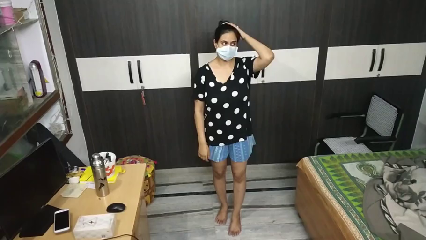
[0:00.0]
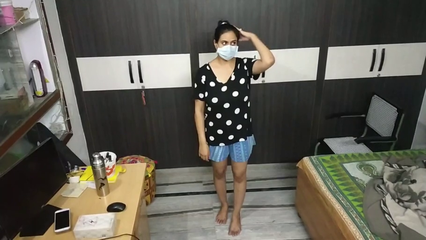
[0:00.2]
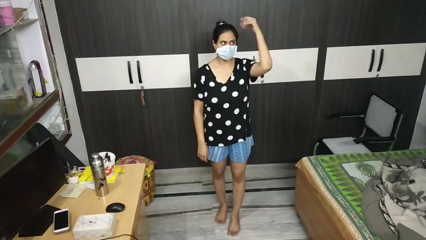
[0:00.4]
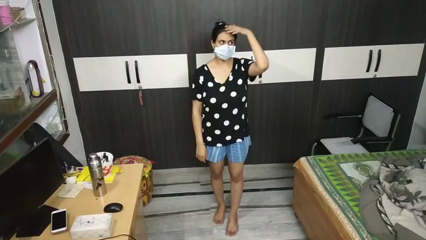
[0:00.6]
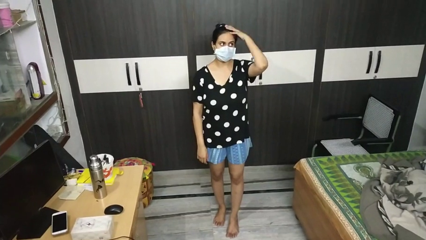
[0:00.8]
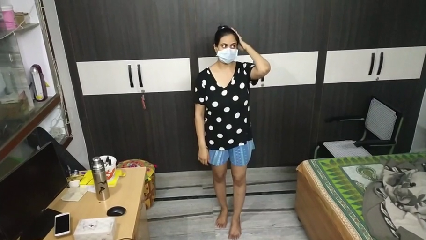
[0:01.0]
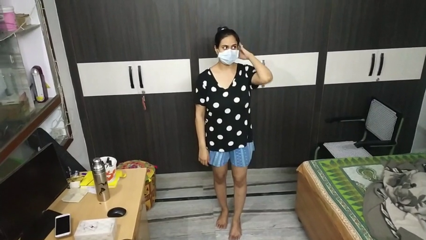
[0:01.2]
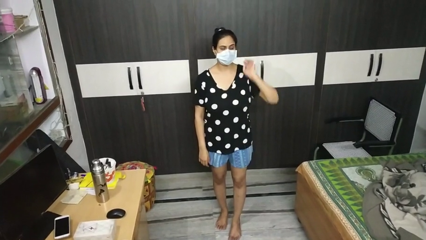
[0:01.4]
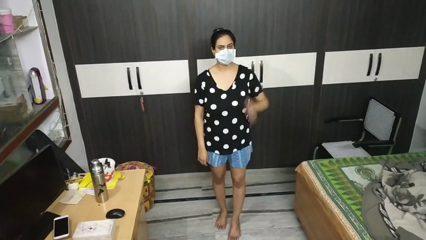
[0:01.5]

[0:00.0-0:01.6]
person pats head

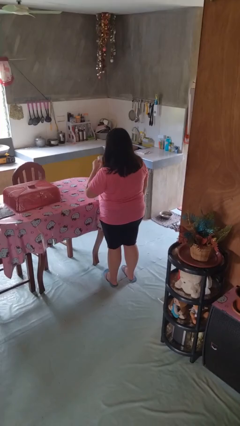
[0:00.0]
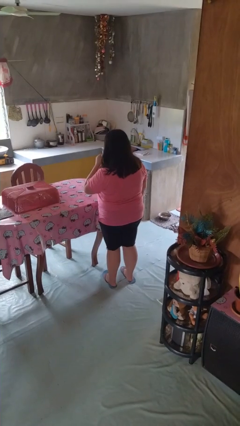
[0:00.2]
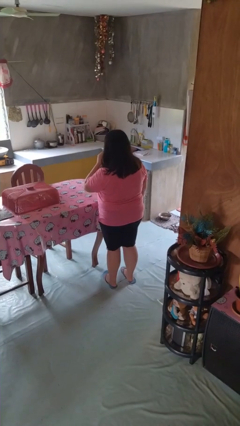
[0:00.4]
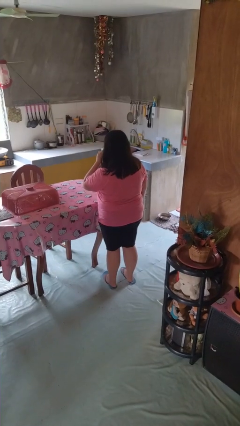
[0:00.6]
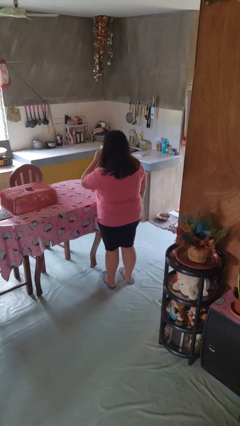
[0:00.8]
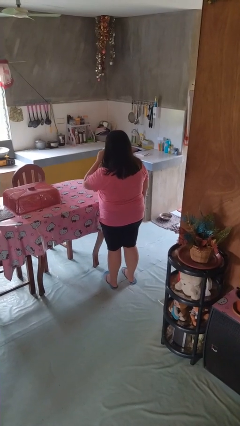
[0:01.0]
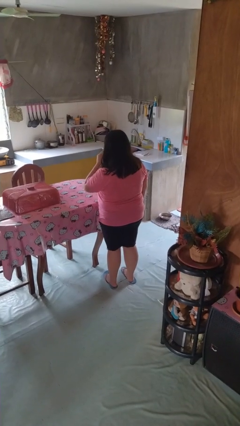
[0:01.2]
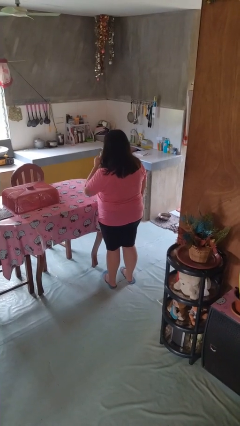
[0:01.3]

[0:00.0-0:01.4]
person drinks from mug

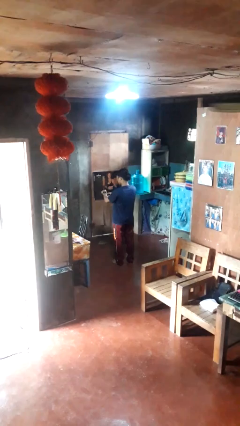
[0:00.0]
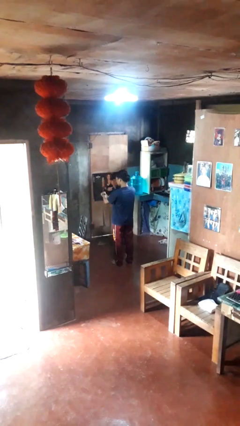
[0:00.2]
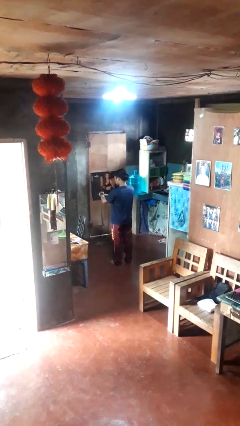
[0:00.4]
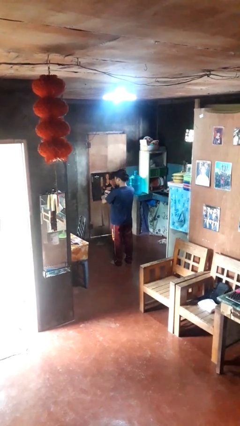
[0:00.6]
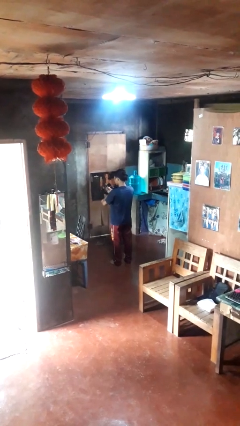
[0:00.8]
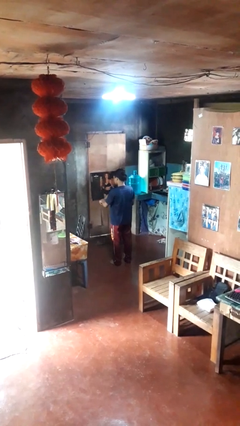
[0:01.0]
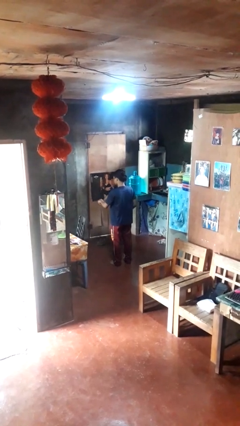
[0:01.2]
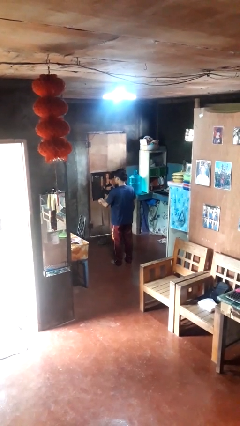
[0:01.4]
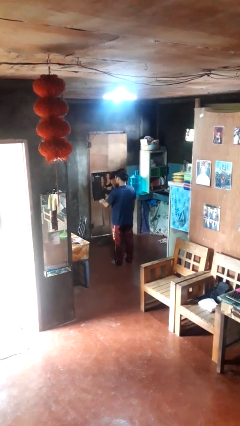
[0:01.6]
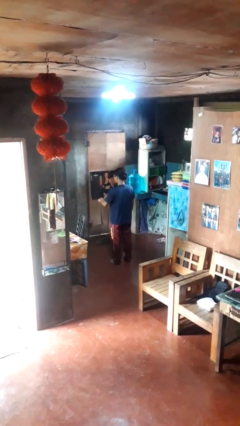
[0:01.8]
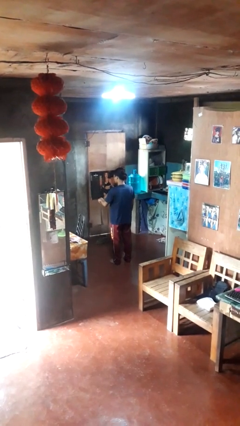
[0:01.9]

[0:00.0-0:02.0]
person takes off wristwatch

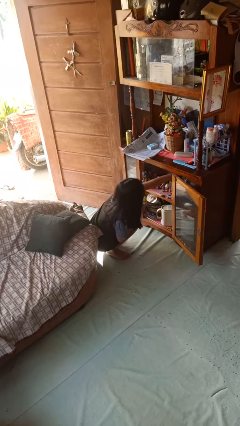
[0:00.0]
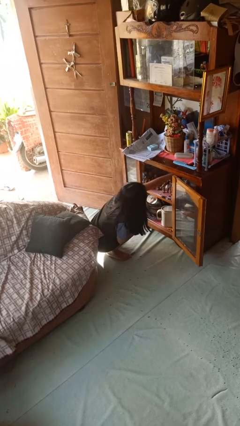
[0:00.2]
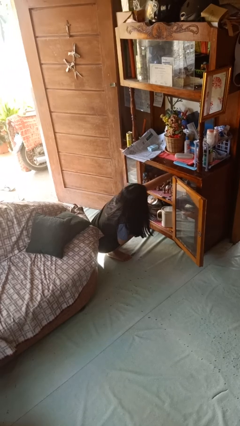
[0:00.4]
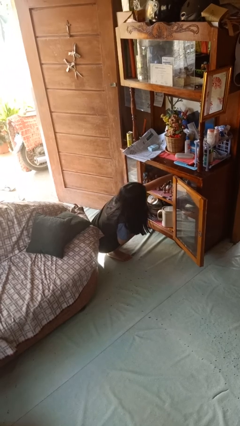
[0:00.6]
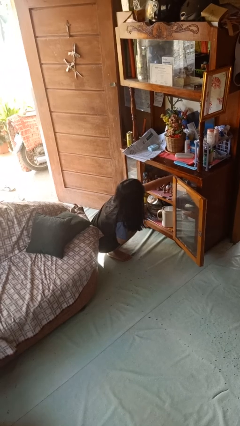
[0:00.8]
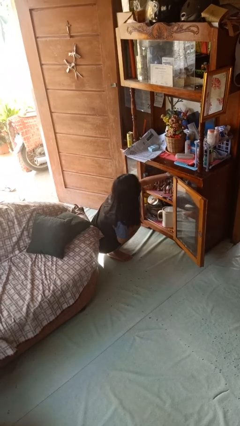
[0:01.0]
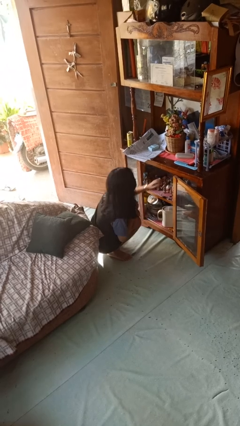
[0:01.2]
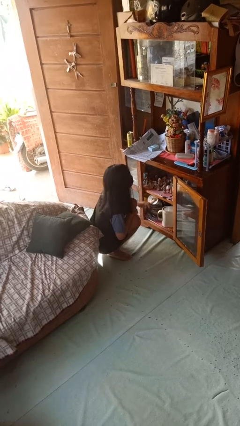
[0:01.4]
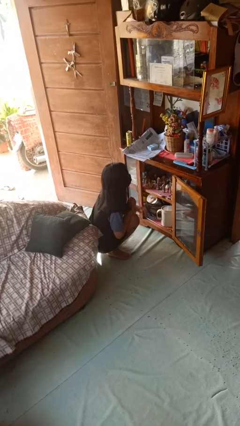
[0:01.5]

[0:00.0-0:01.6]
person searches in cabinet

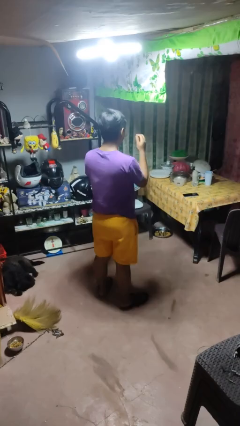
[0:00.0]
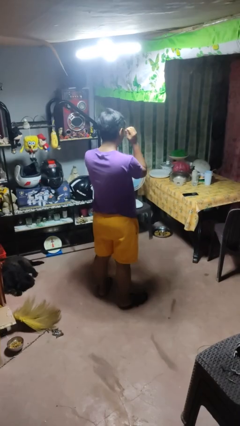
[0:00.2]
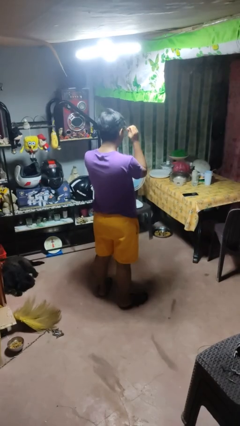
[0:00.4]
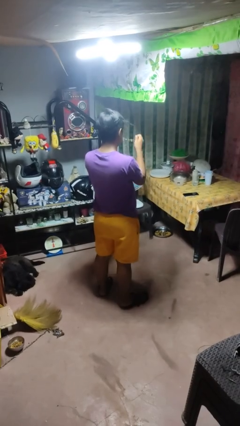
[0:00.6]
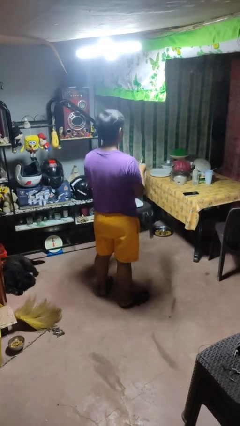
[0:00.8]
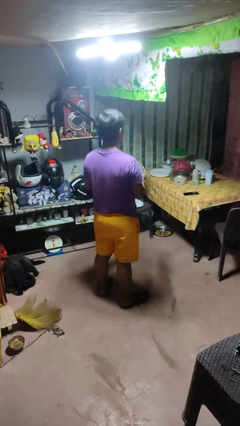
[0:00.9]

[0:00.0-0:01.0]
person takes off glasses

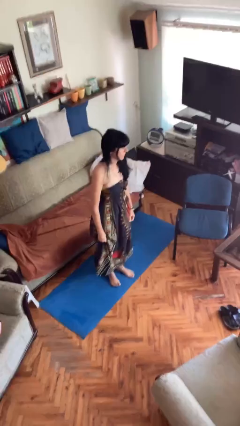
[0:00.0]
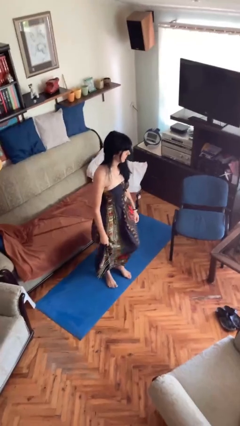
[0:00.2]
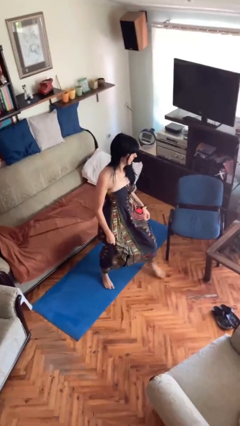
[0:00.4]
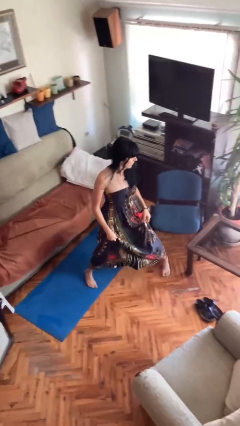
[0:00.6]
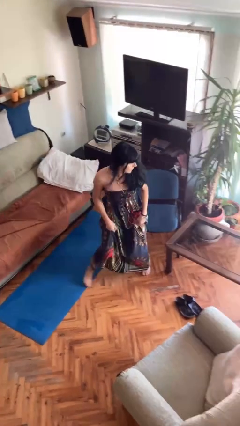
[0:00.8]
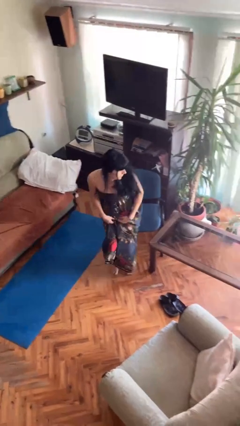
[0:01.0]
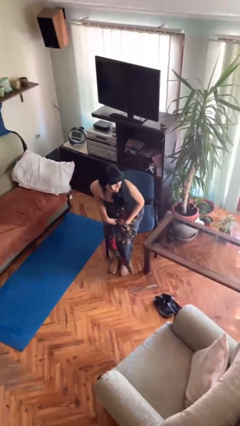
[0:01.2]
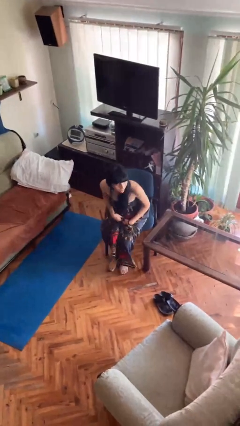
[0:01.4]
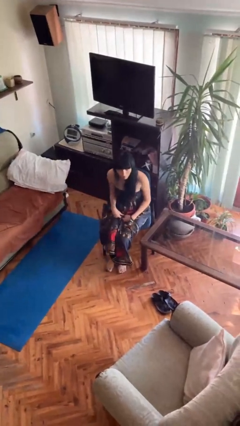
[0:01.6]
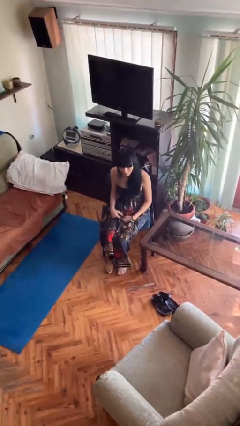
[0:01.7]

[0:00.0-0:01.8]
person sits down

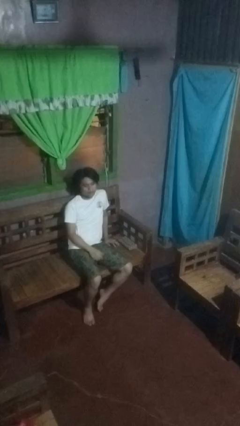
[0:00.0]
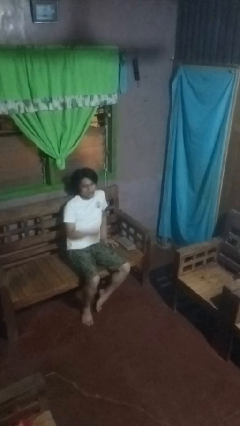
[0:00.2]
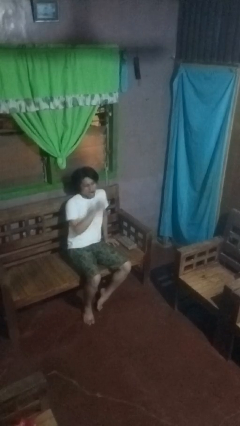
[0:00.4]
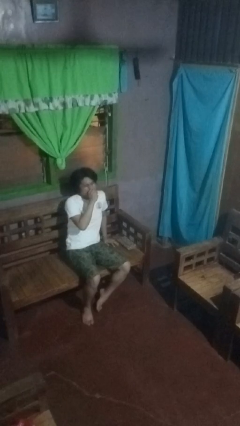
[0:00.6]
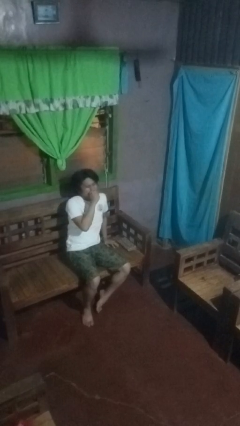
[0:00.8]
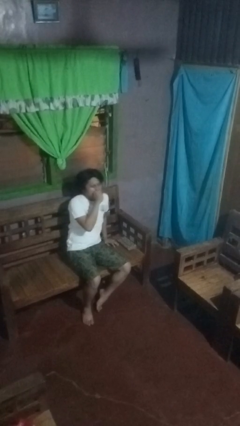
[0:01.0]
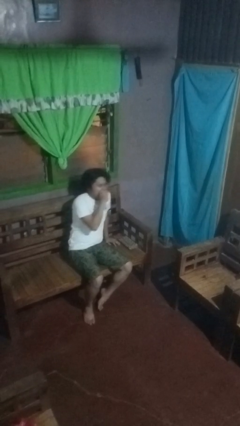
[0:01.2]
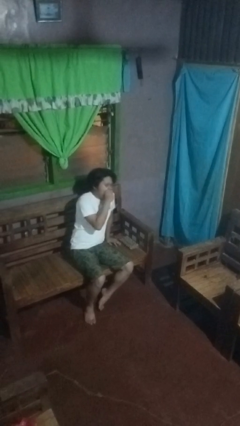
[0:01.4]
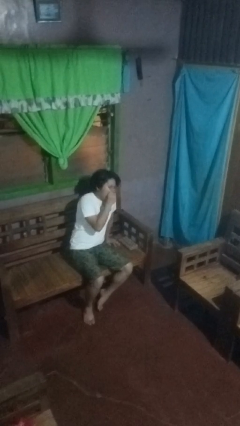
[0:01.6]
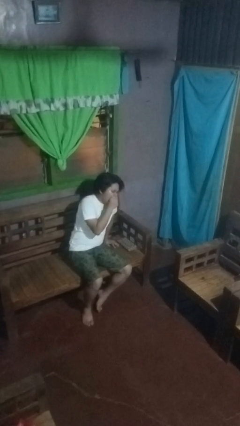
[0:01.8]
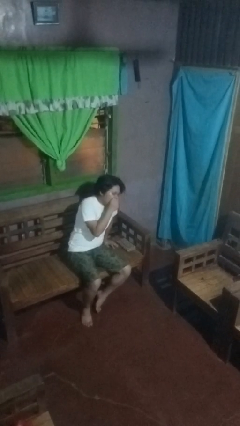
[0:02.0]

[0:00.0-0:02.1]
person yawns

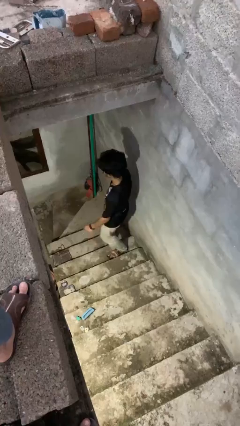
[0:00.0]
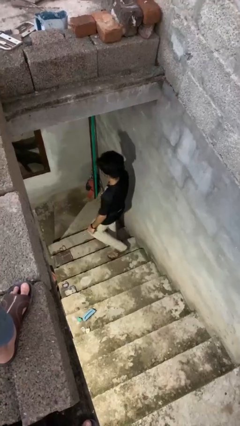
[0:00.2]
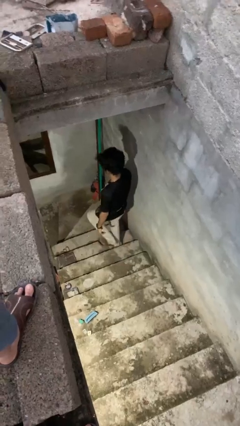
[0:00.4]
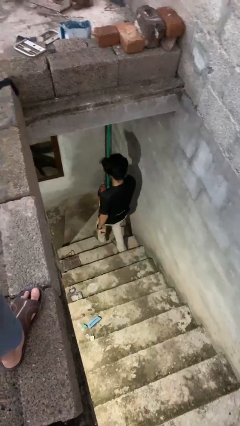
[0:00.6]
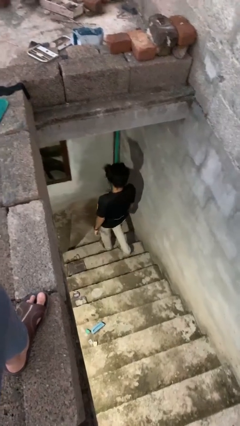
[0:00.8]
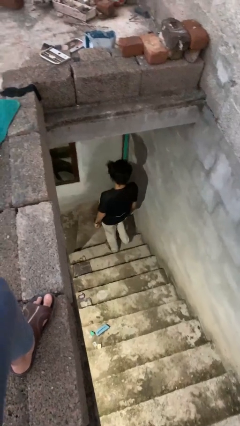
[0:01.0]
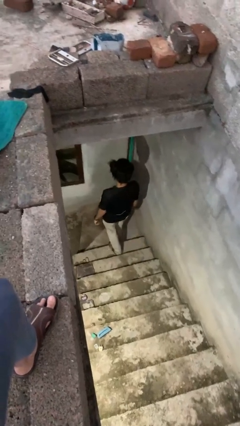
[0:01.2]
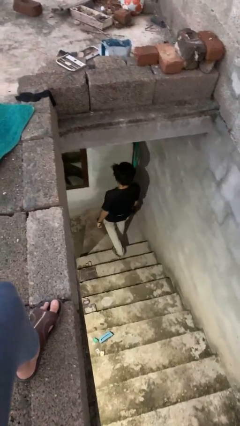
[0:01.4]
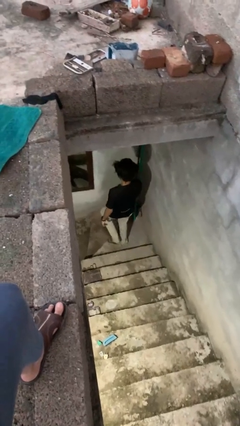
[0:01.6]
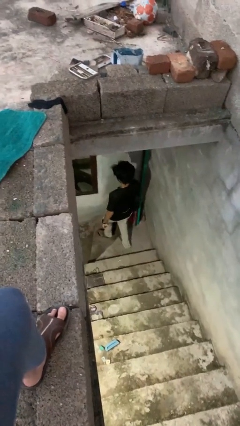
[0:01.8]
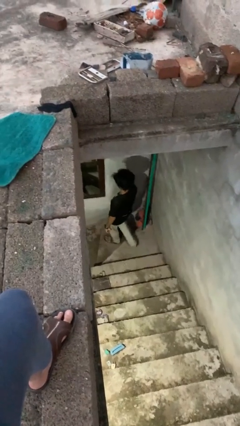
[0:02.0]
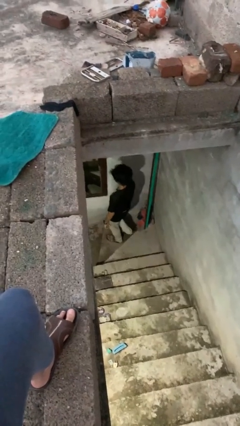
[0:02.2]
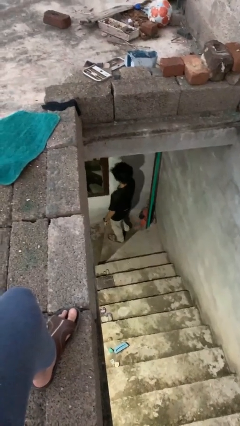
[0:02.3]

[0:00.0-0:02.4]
person climbs down stairs

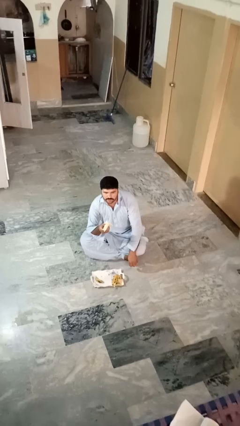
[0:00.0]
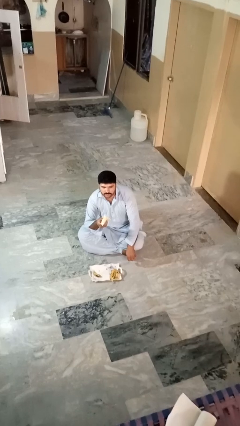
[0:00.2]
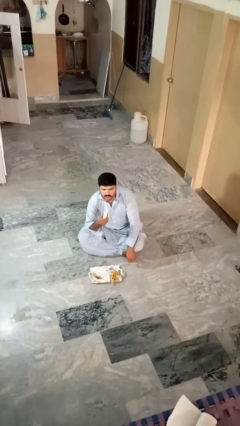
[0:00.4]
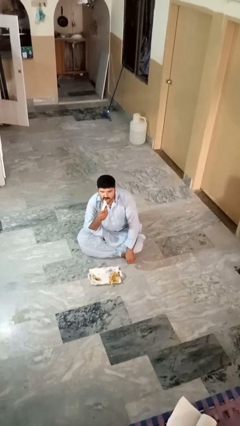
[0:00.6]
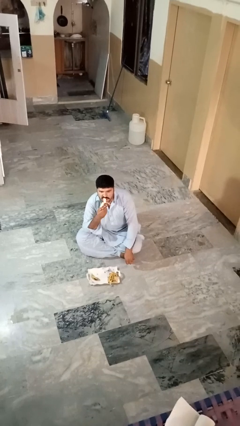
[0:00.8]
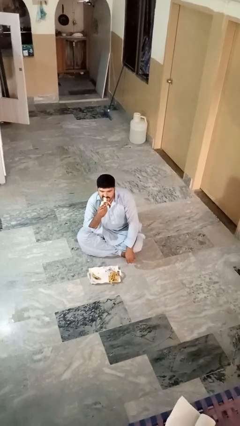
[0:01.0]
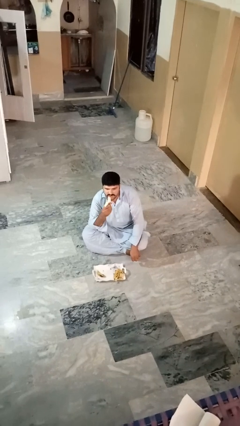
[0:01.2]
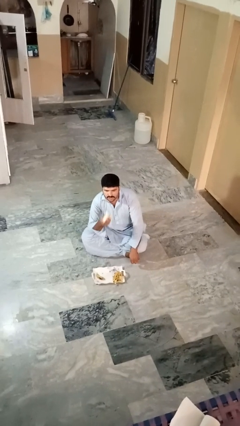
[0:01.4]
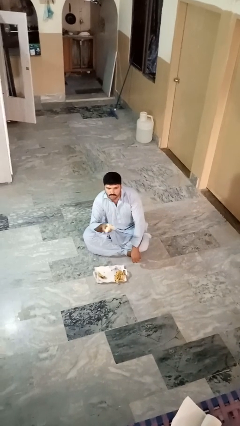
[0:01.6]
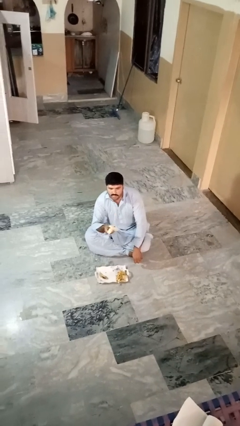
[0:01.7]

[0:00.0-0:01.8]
person eats banana

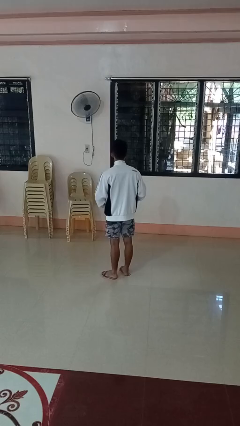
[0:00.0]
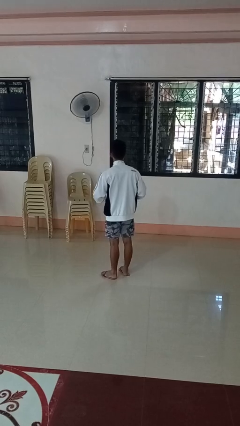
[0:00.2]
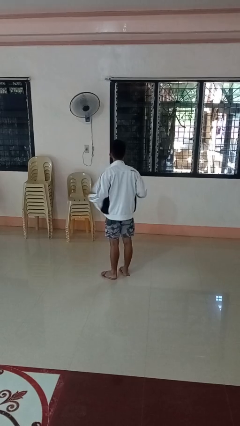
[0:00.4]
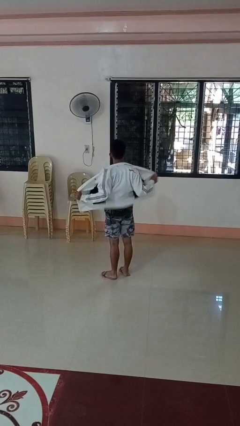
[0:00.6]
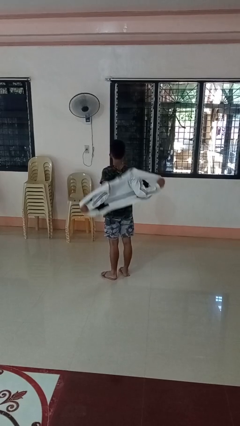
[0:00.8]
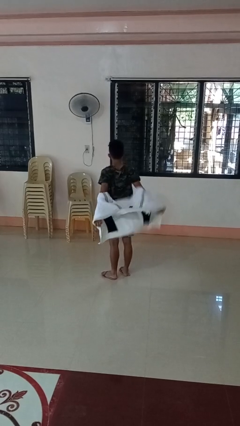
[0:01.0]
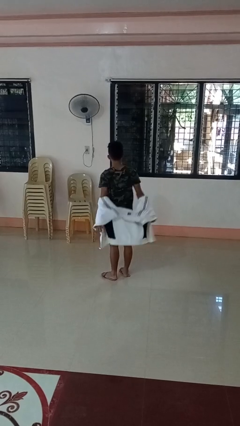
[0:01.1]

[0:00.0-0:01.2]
person unzips jacket
